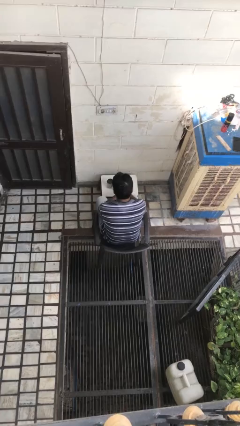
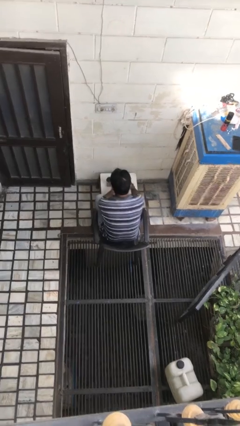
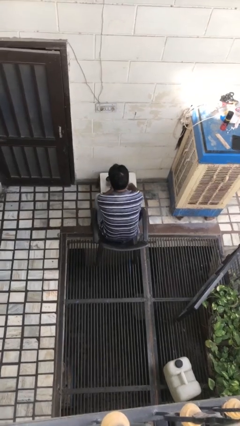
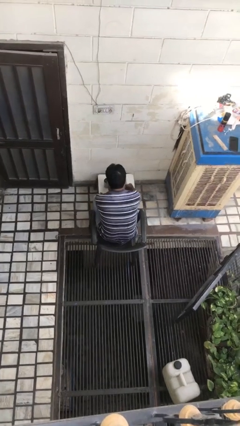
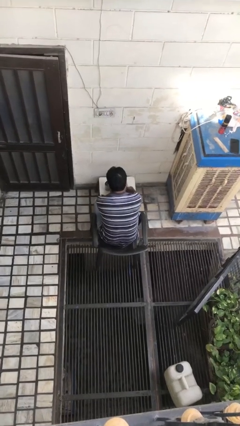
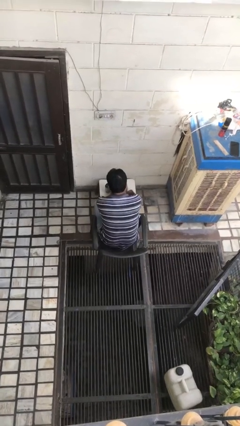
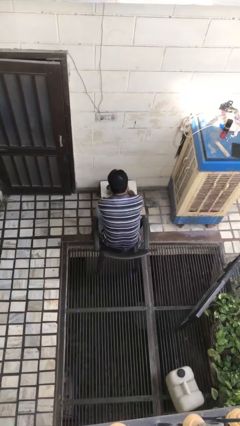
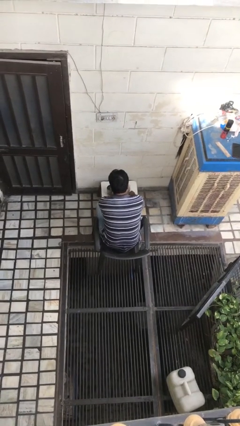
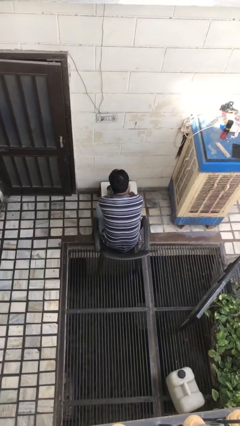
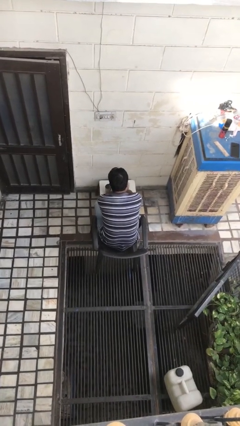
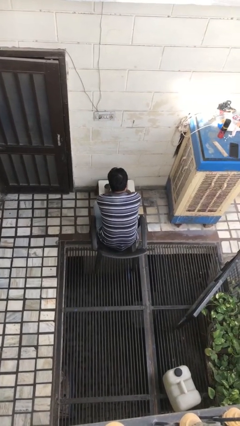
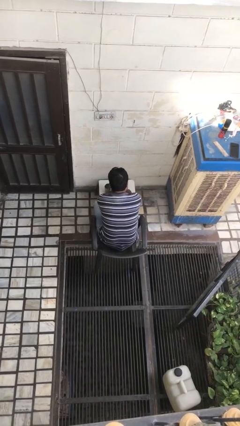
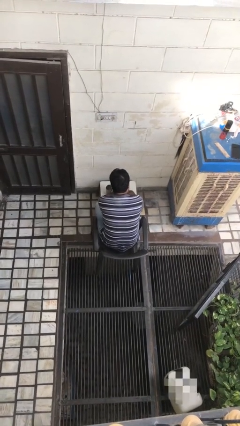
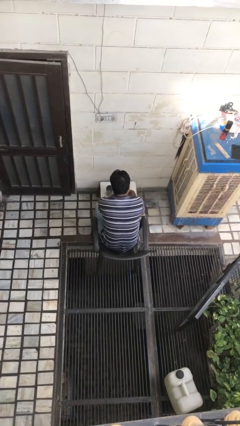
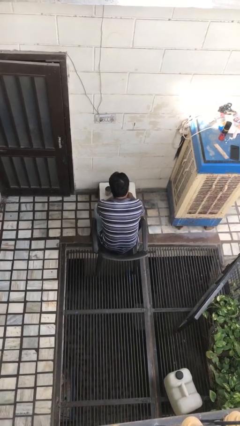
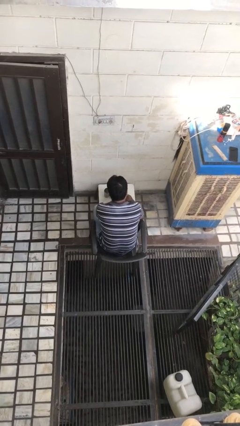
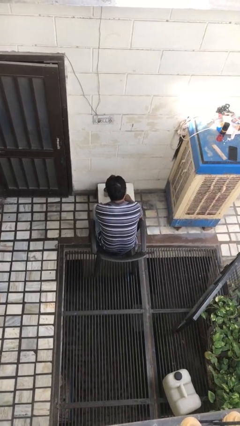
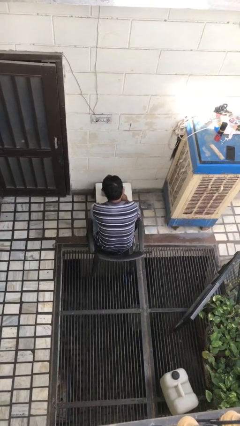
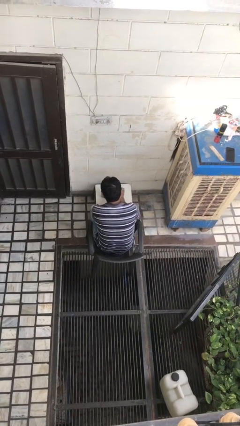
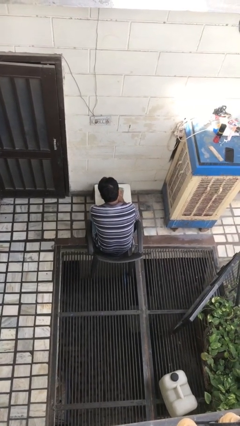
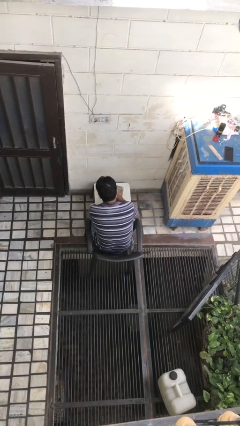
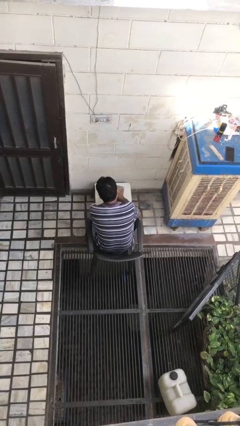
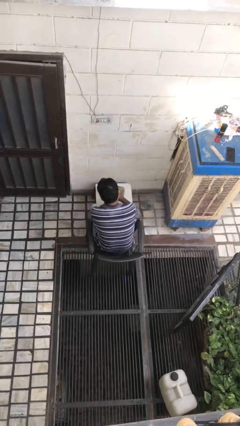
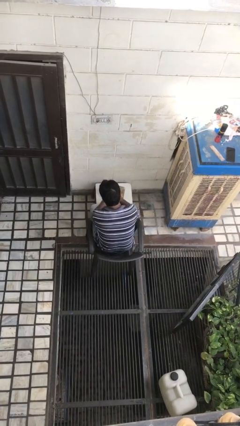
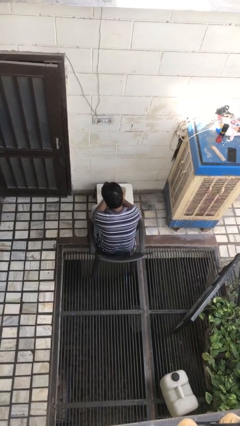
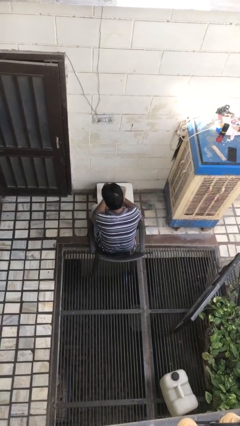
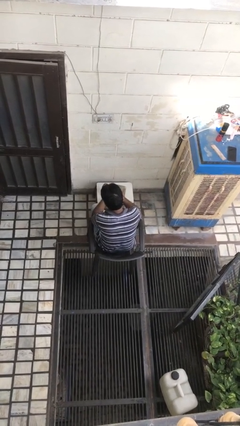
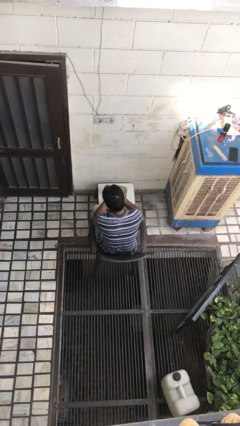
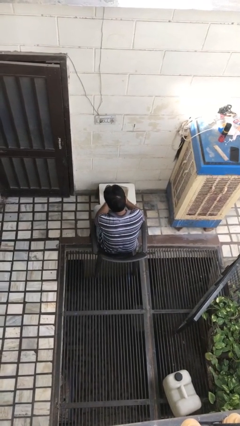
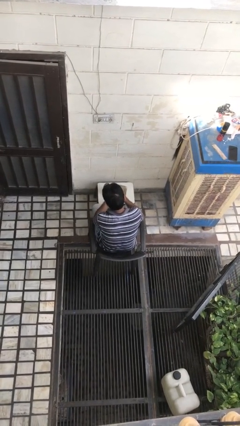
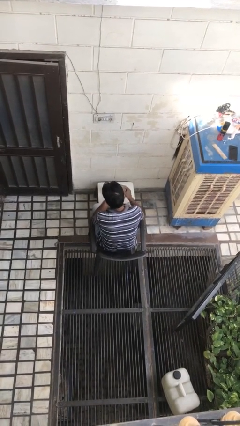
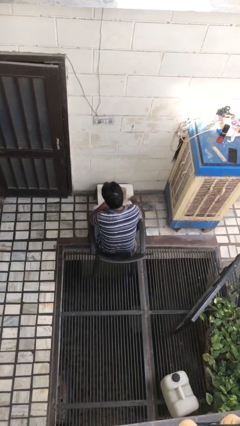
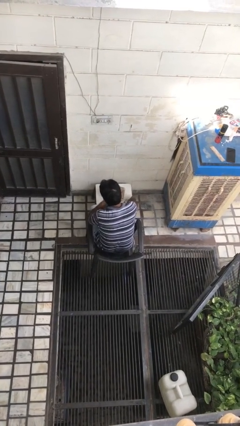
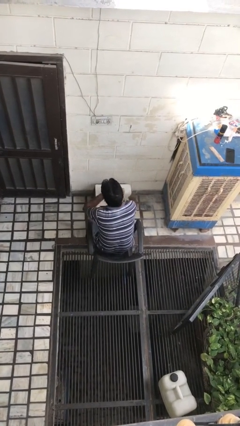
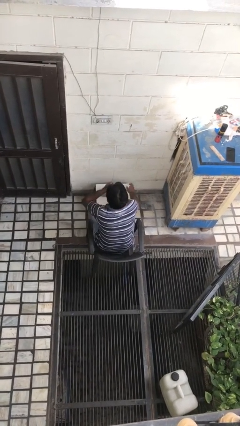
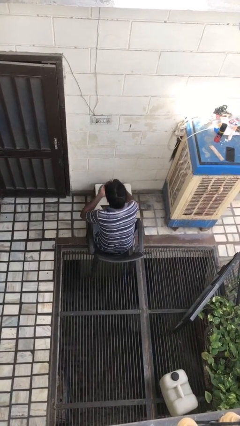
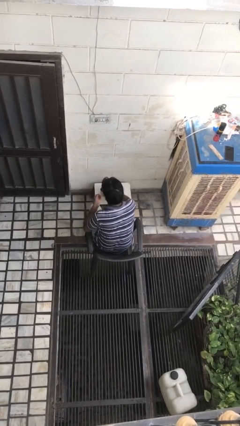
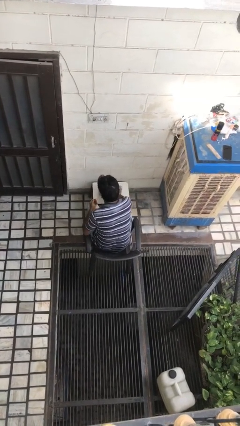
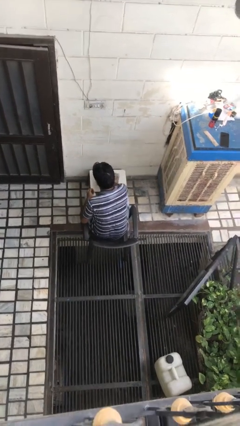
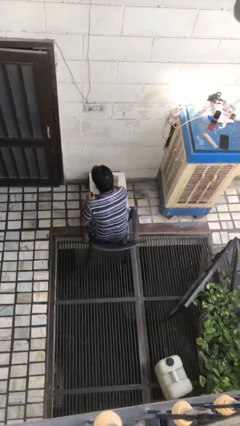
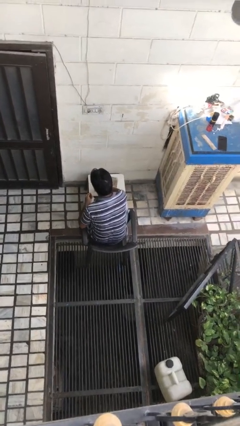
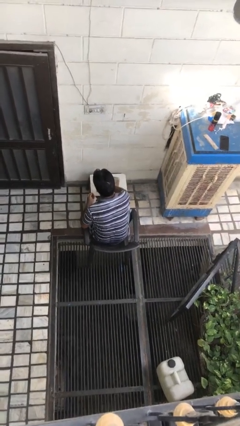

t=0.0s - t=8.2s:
person takes medicine pills

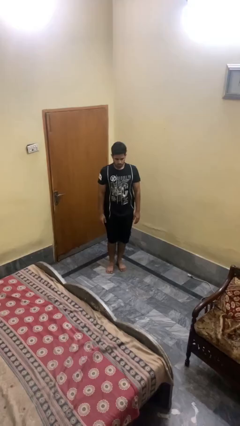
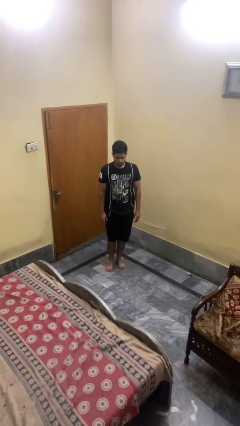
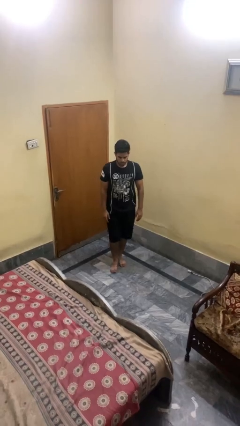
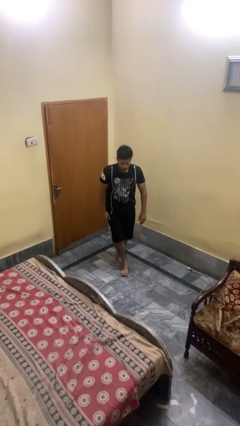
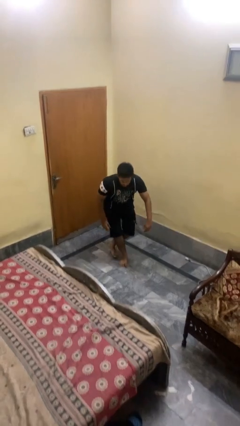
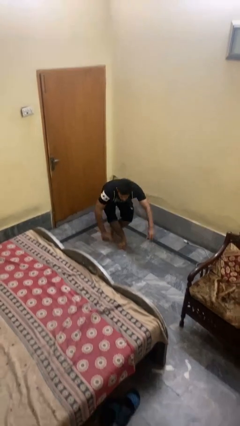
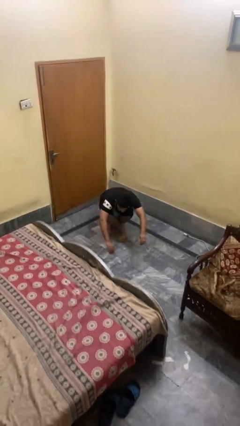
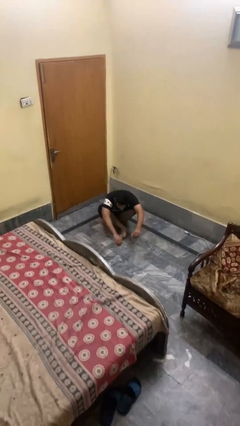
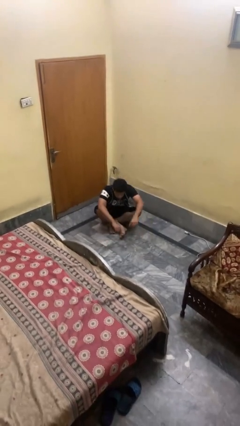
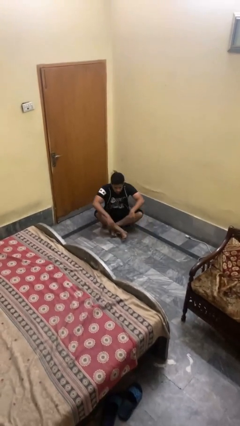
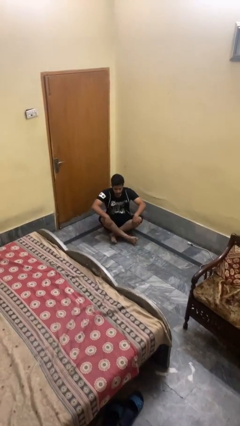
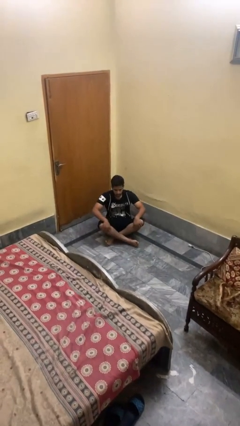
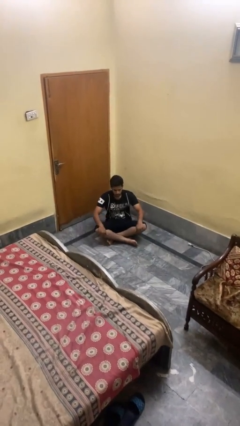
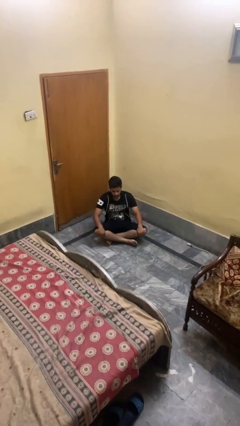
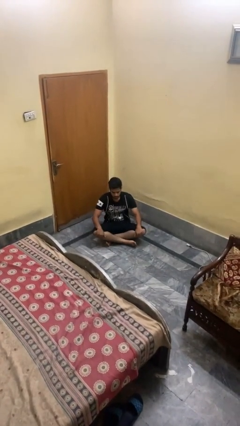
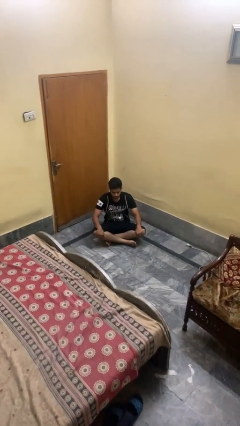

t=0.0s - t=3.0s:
person sits crisscross

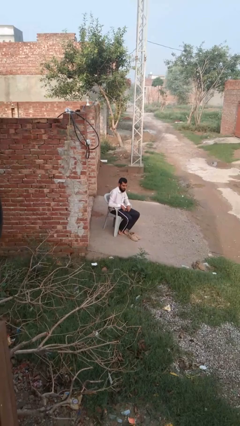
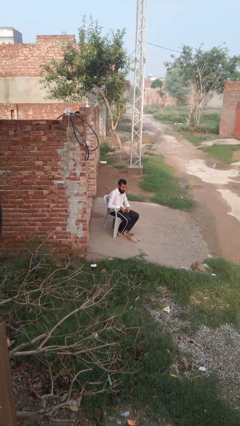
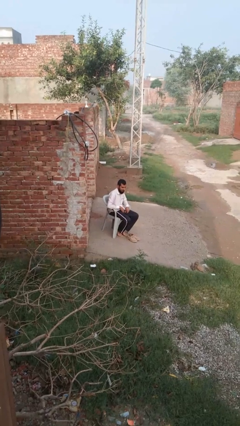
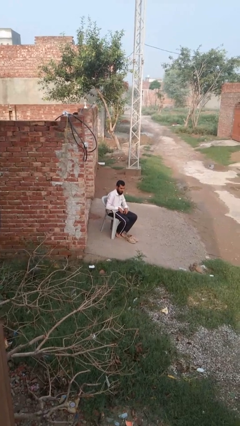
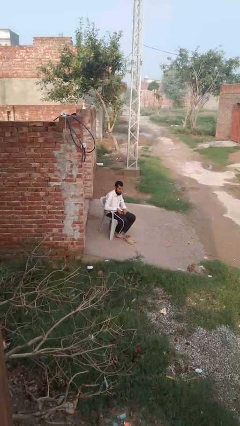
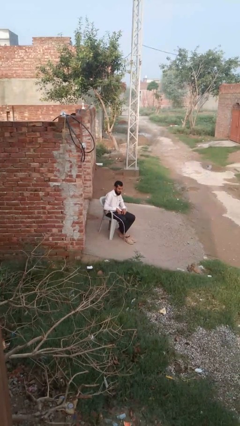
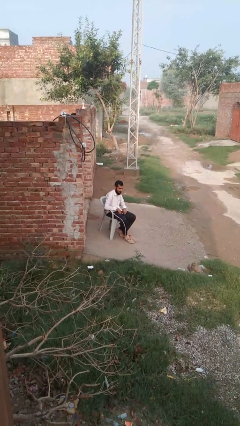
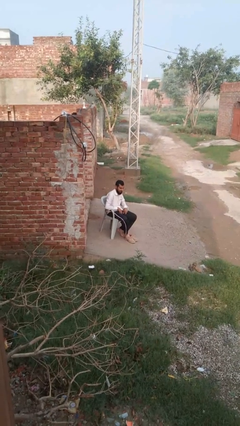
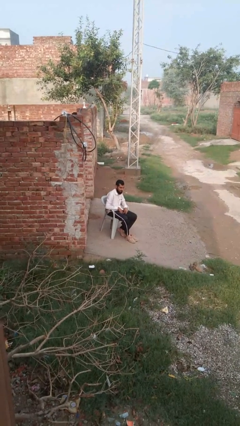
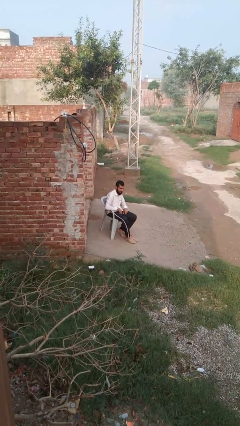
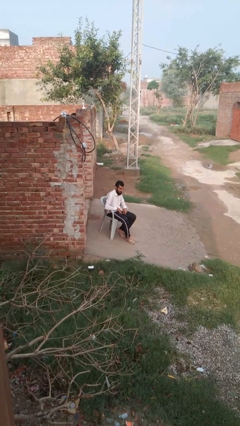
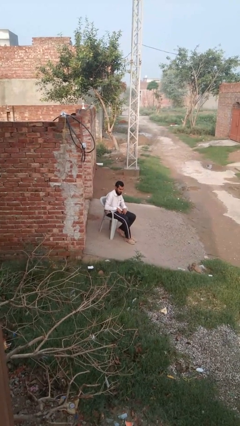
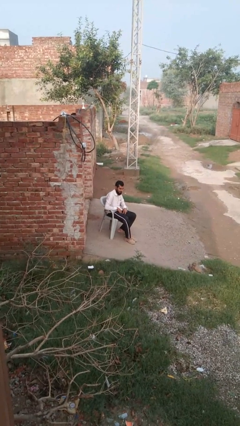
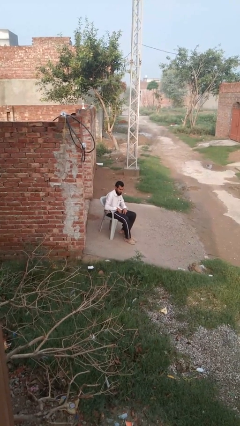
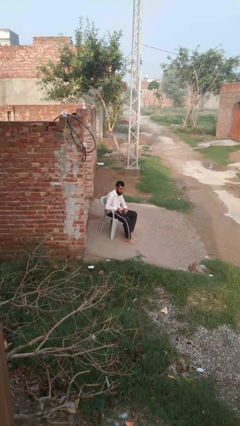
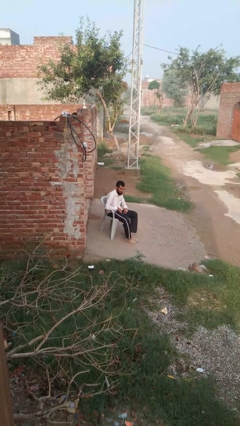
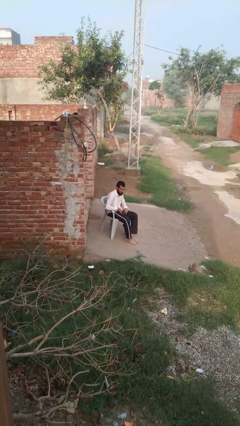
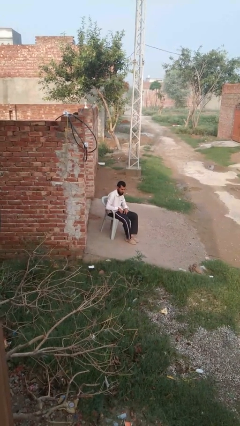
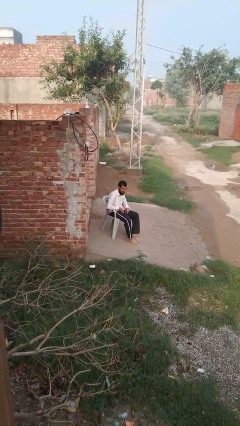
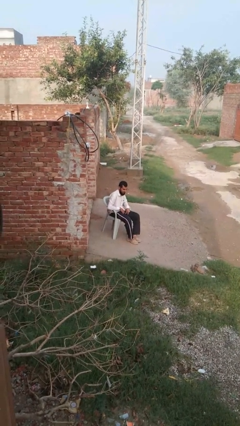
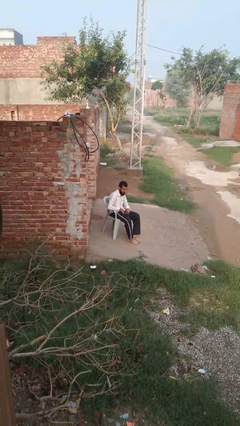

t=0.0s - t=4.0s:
person puts on shoes

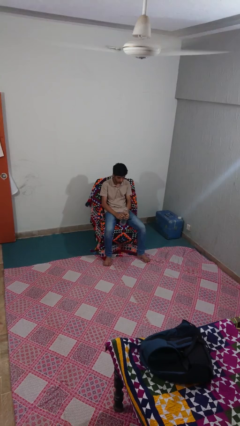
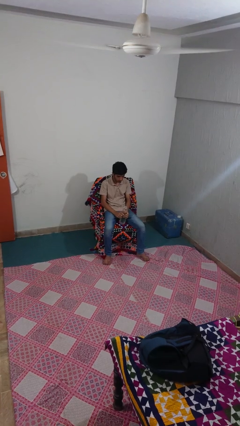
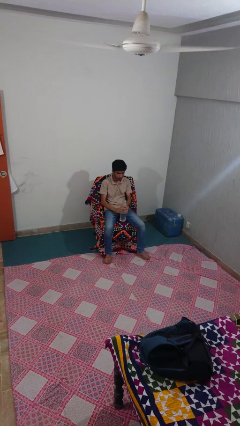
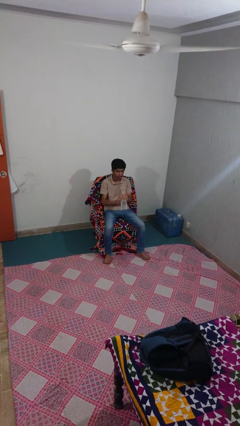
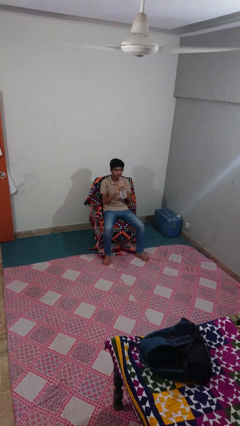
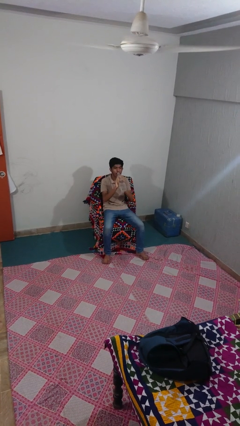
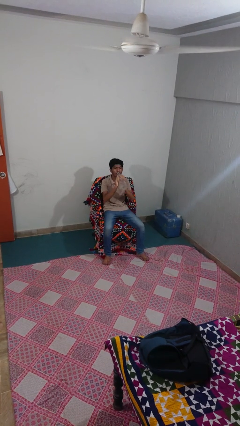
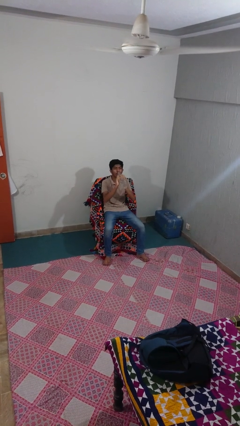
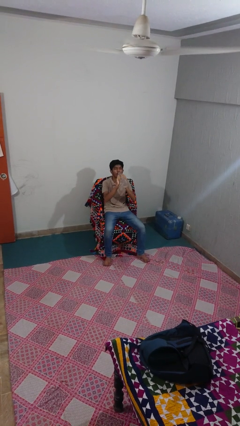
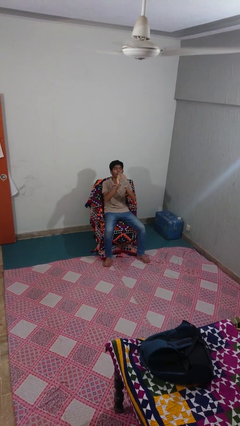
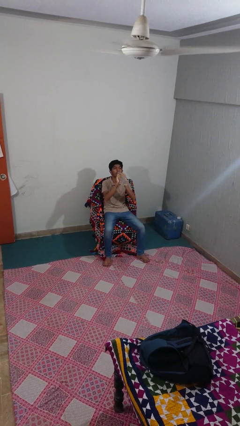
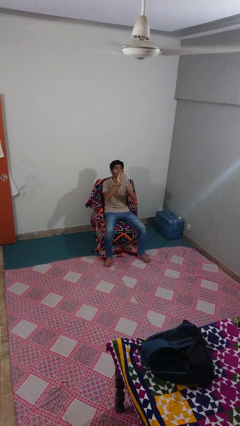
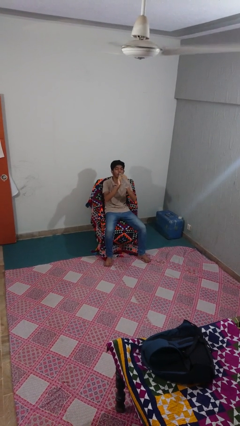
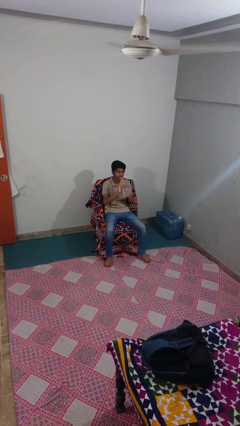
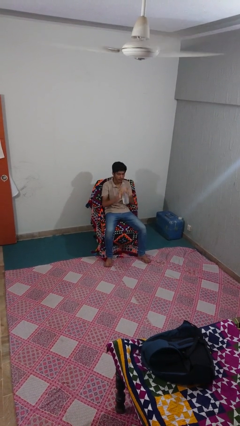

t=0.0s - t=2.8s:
person drinks from bottle
